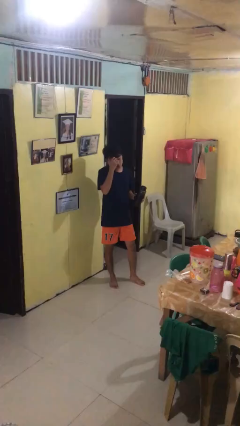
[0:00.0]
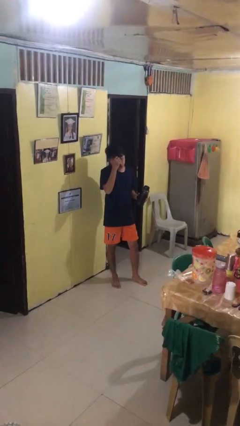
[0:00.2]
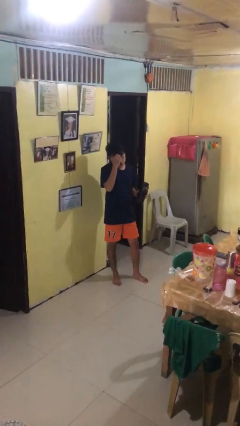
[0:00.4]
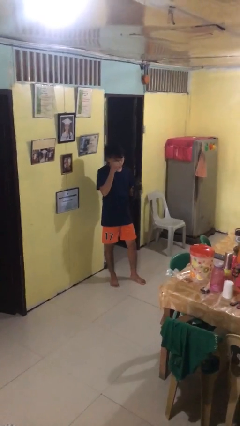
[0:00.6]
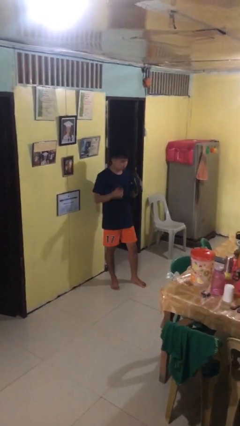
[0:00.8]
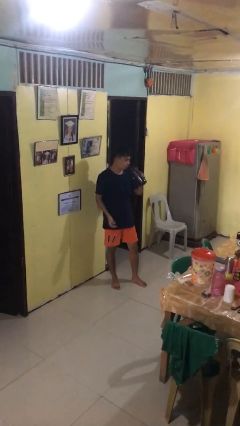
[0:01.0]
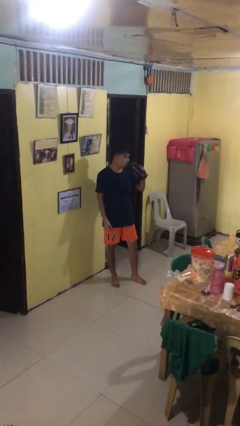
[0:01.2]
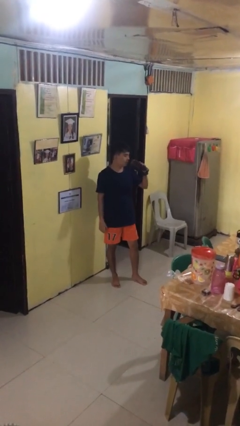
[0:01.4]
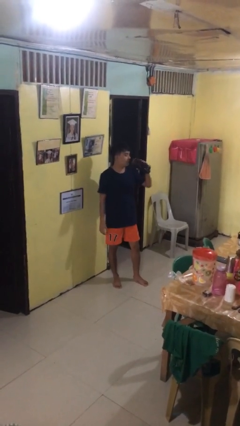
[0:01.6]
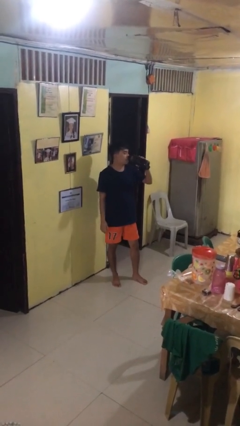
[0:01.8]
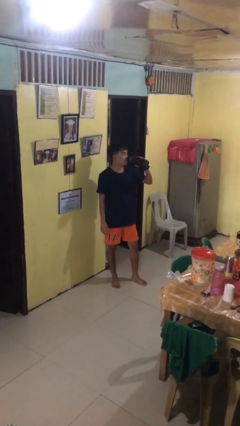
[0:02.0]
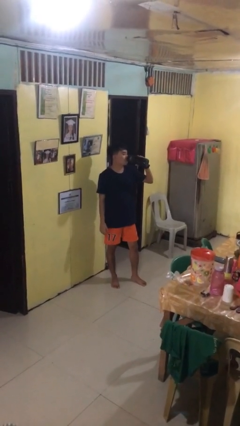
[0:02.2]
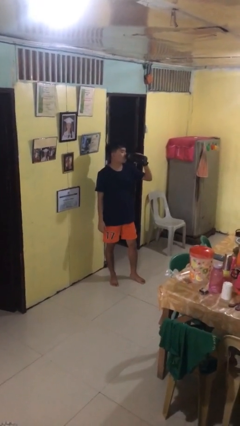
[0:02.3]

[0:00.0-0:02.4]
person drinks from bottle

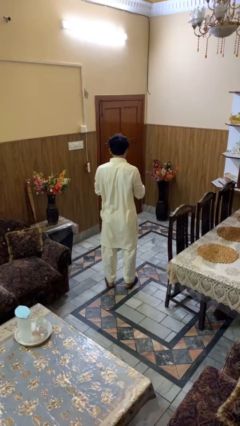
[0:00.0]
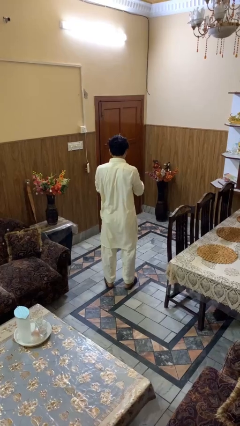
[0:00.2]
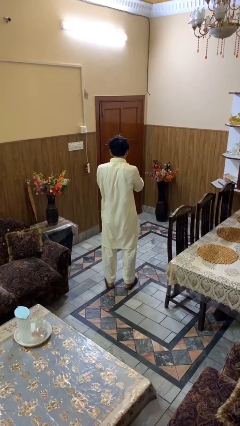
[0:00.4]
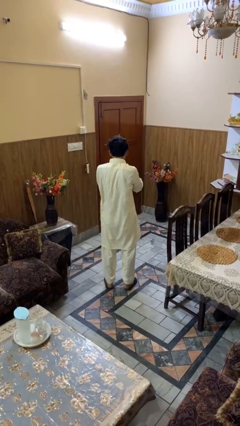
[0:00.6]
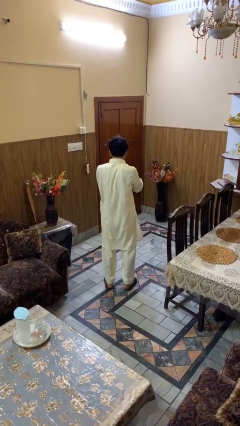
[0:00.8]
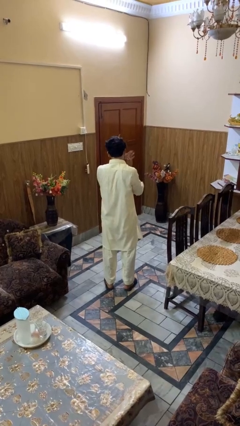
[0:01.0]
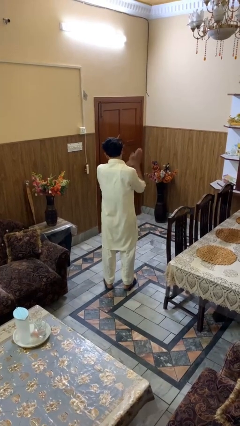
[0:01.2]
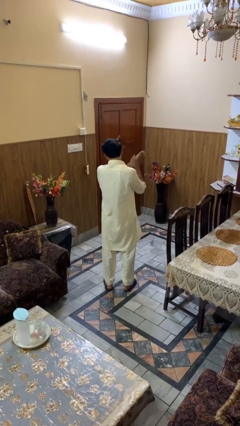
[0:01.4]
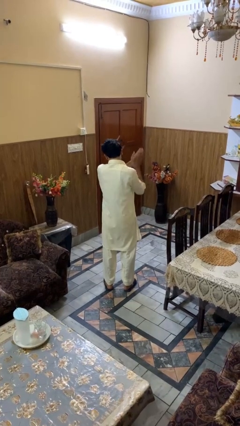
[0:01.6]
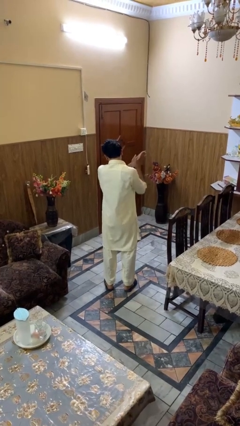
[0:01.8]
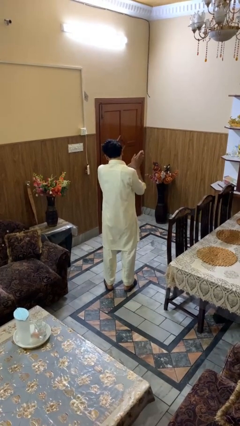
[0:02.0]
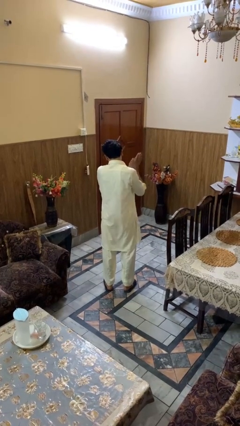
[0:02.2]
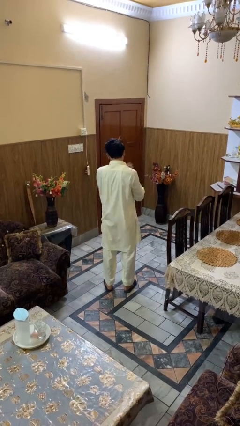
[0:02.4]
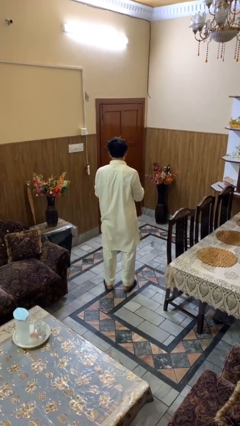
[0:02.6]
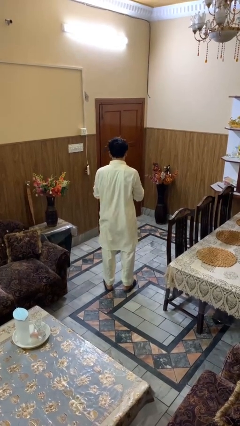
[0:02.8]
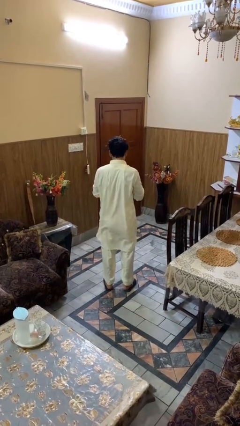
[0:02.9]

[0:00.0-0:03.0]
person blows into hands

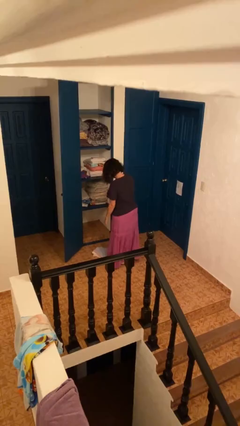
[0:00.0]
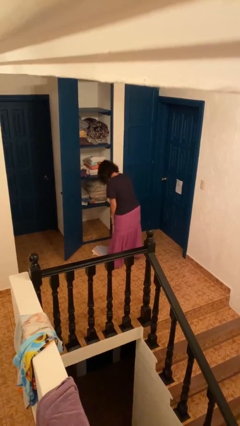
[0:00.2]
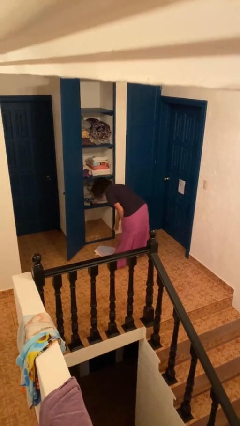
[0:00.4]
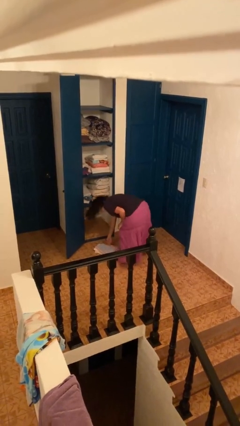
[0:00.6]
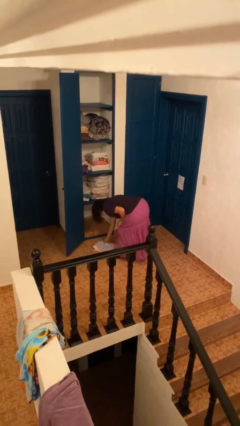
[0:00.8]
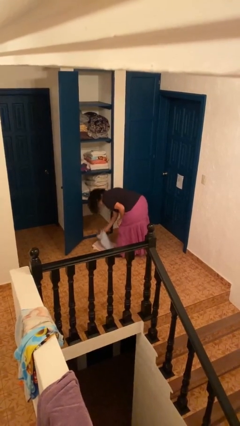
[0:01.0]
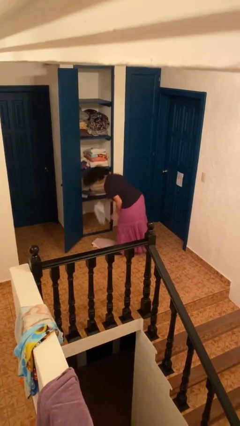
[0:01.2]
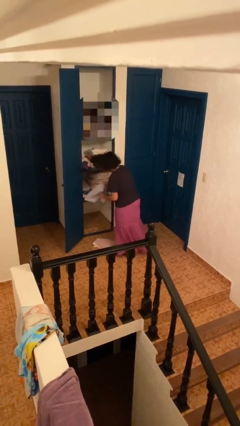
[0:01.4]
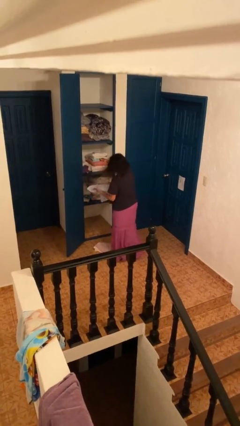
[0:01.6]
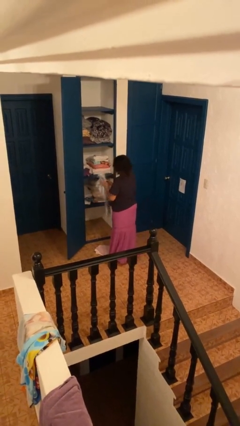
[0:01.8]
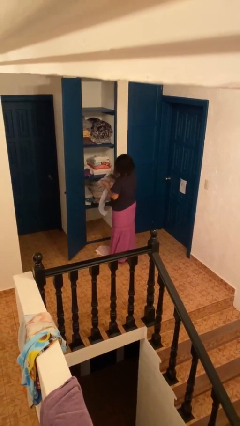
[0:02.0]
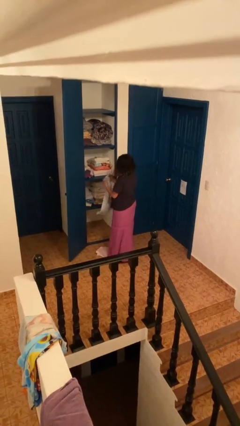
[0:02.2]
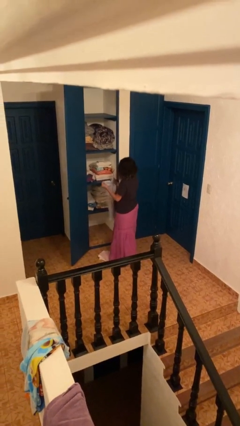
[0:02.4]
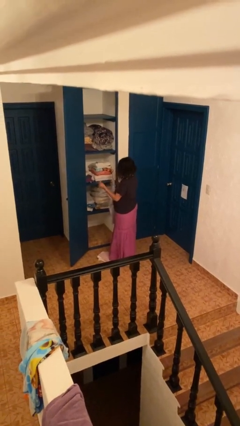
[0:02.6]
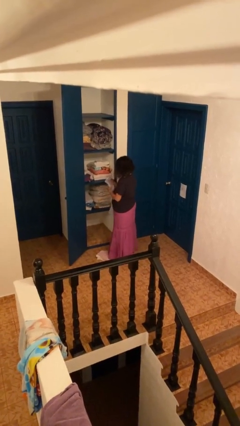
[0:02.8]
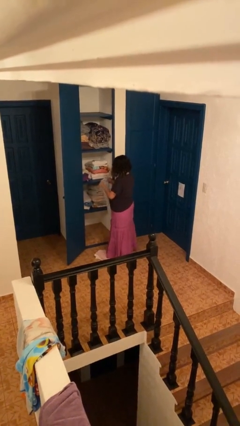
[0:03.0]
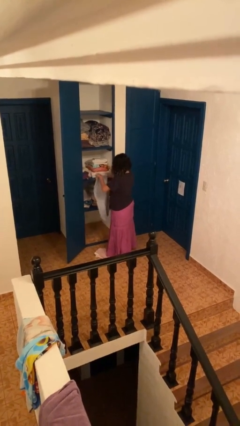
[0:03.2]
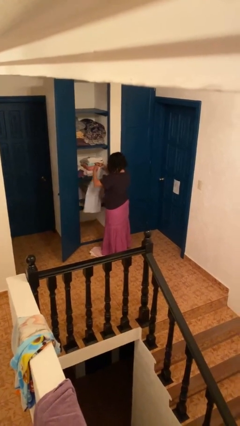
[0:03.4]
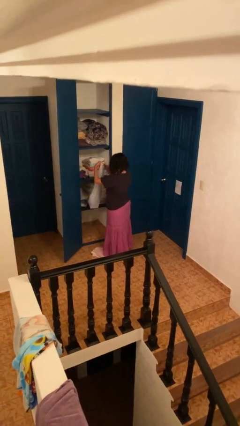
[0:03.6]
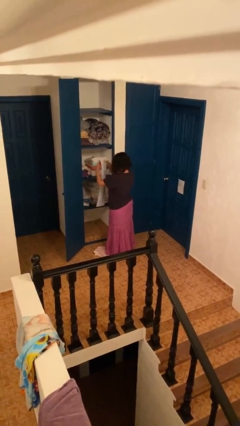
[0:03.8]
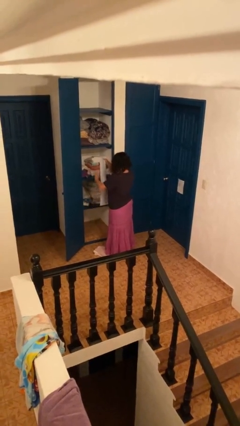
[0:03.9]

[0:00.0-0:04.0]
person folds towel

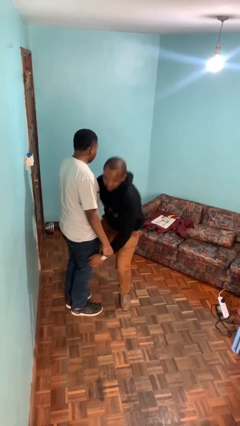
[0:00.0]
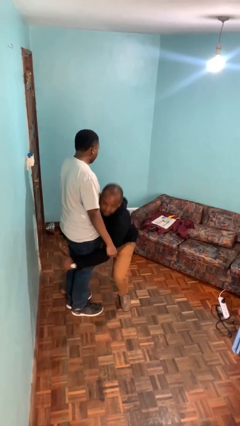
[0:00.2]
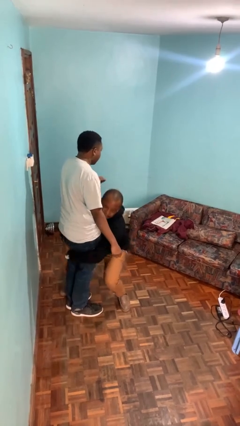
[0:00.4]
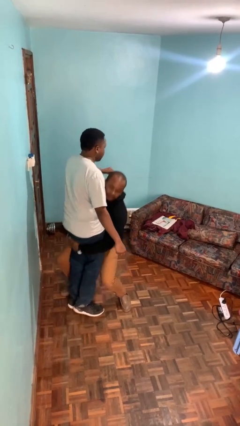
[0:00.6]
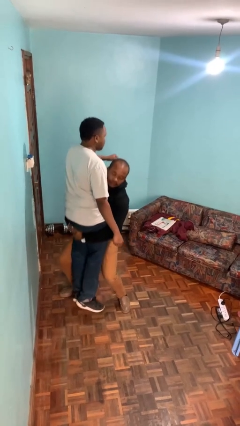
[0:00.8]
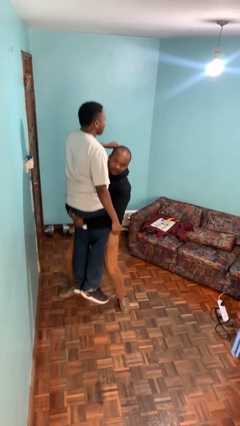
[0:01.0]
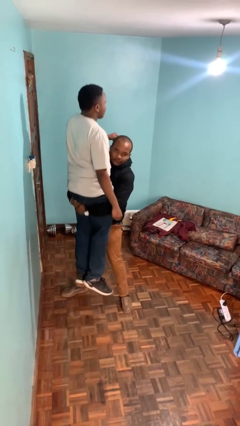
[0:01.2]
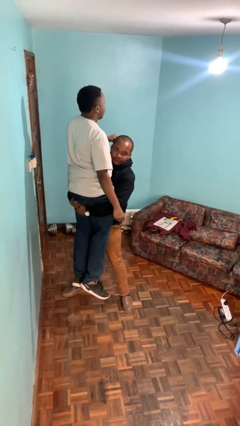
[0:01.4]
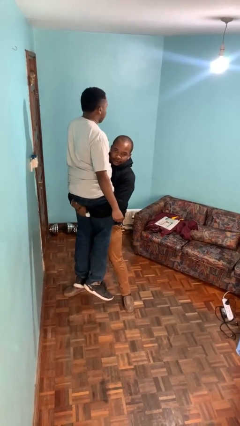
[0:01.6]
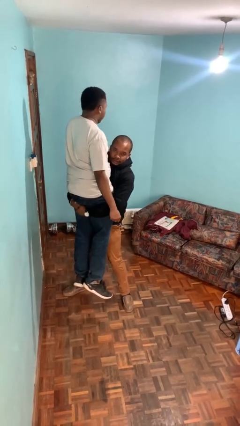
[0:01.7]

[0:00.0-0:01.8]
person picks up person

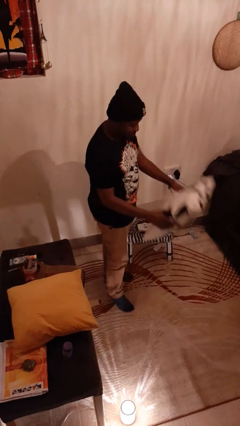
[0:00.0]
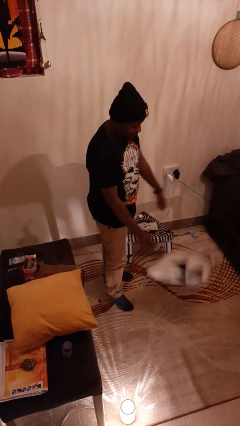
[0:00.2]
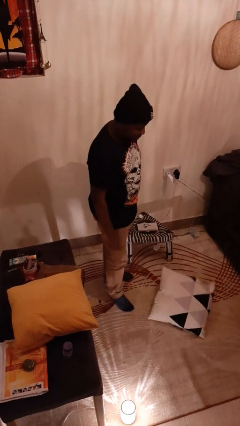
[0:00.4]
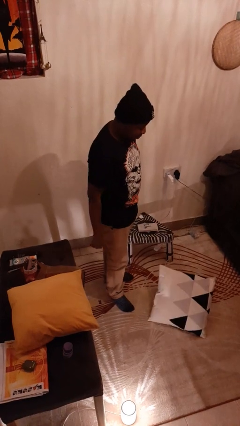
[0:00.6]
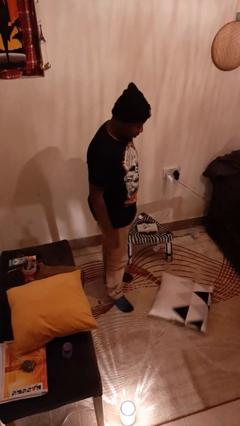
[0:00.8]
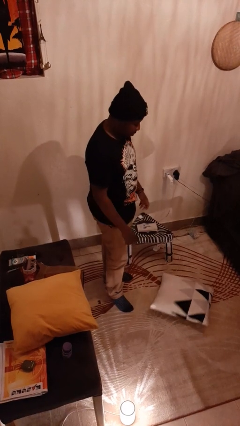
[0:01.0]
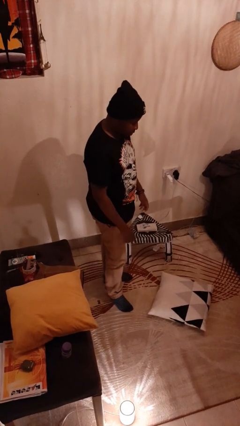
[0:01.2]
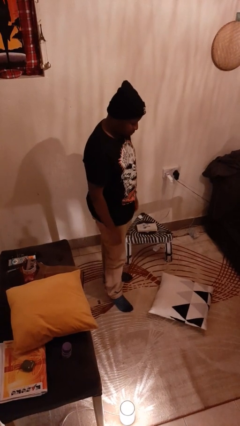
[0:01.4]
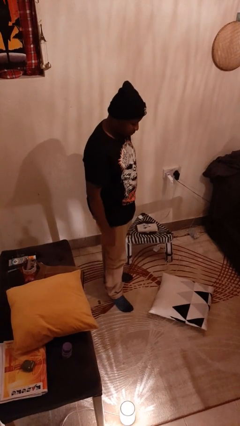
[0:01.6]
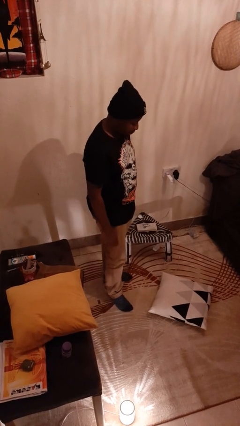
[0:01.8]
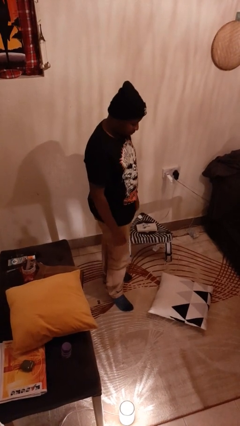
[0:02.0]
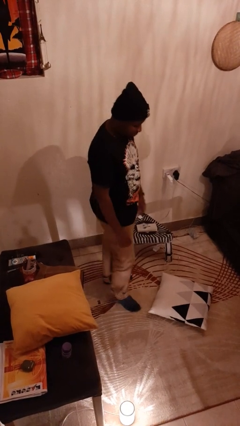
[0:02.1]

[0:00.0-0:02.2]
person drops object

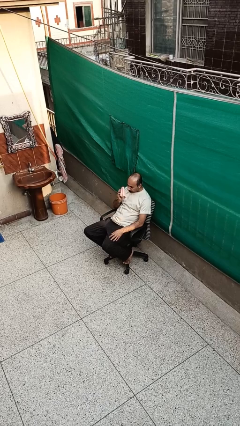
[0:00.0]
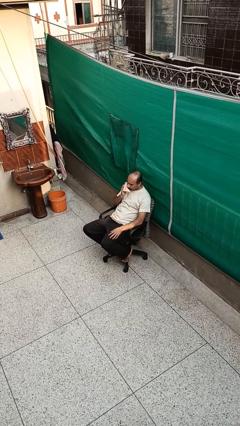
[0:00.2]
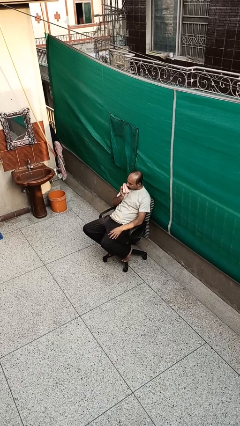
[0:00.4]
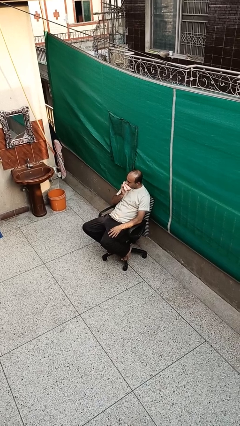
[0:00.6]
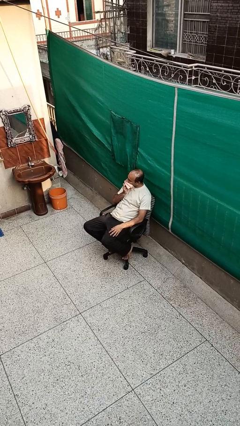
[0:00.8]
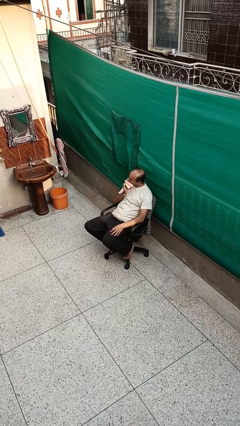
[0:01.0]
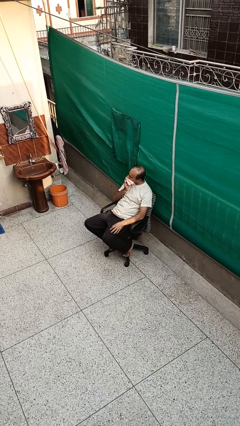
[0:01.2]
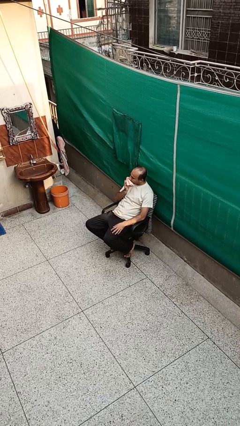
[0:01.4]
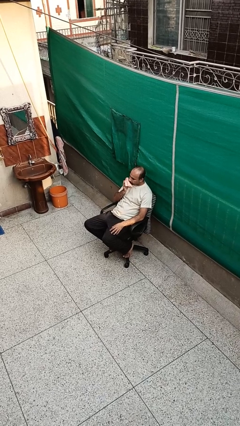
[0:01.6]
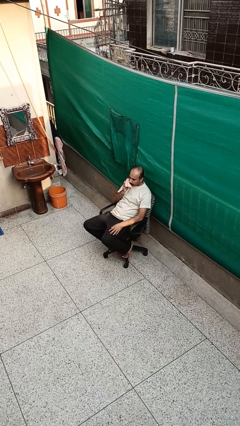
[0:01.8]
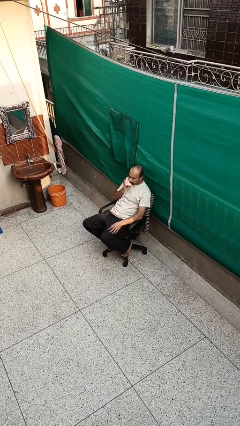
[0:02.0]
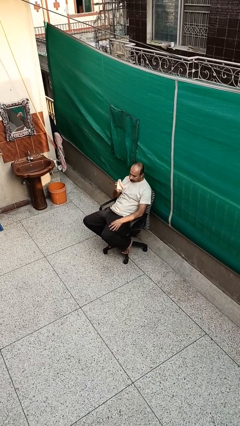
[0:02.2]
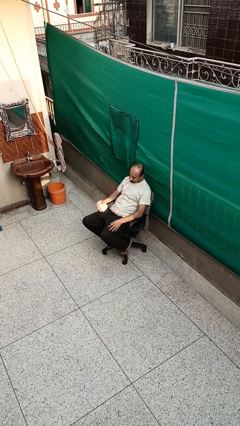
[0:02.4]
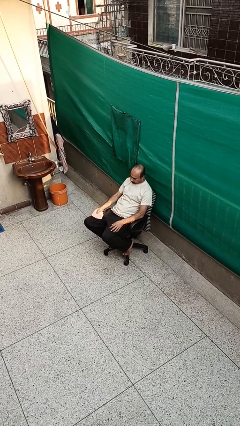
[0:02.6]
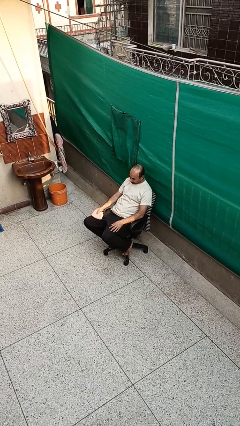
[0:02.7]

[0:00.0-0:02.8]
person wipes mouth with napkin

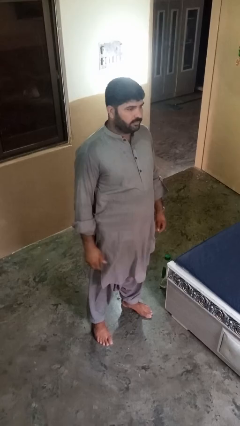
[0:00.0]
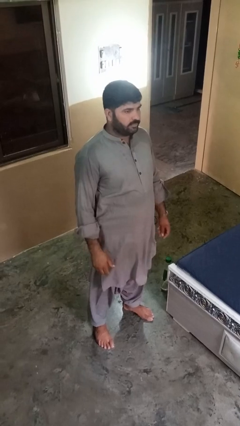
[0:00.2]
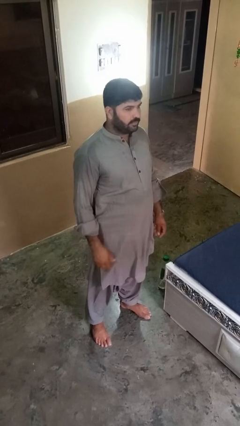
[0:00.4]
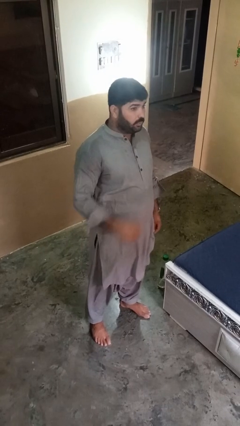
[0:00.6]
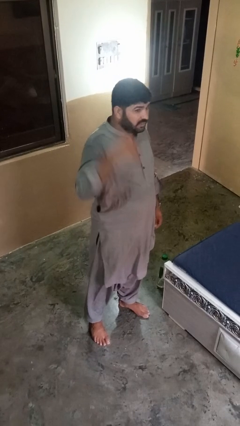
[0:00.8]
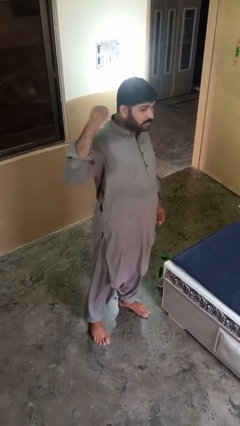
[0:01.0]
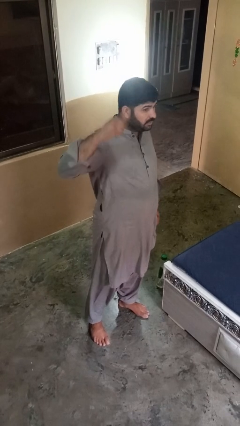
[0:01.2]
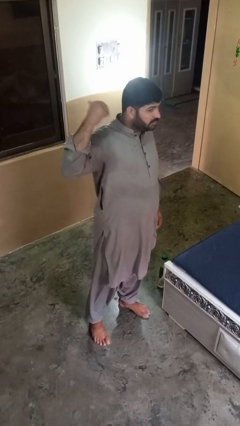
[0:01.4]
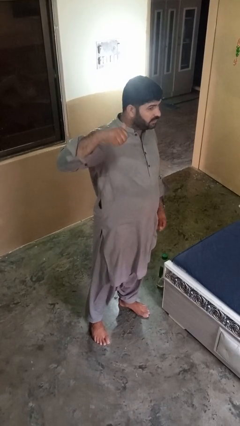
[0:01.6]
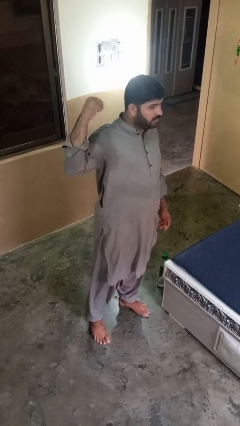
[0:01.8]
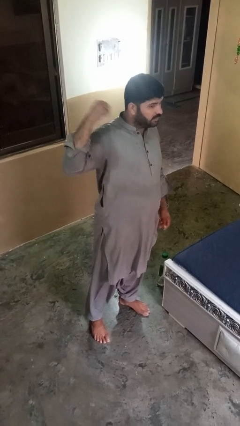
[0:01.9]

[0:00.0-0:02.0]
person gestures behind me
